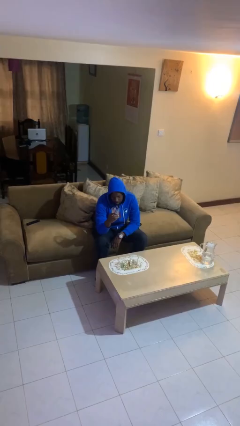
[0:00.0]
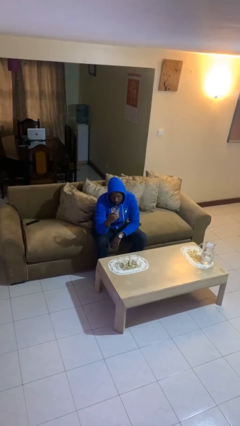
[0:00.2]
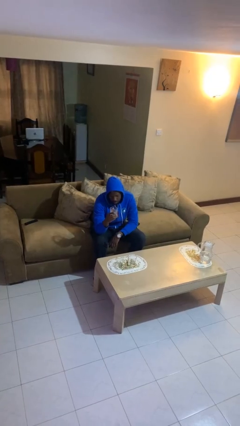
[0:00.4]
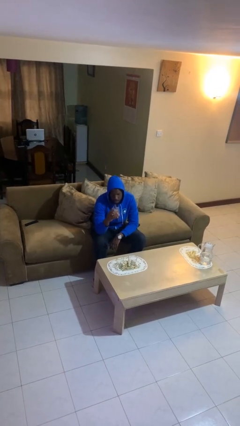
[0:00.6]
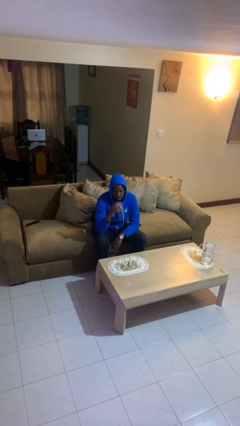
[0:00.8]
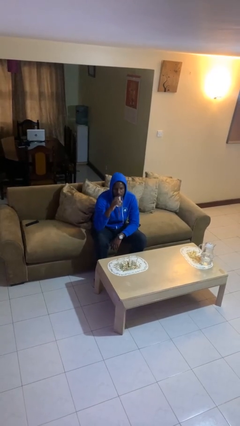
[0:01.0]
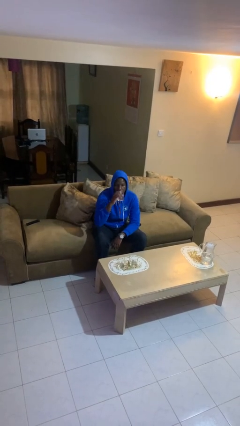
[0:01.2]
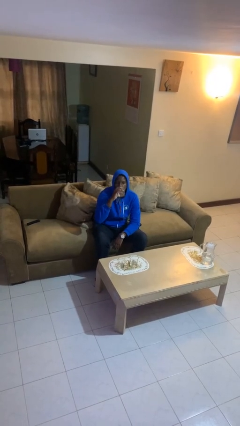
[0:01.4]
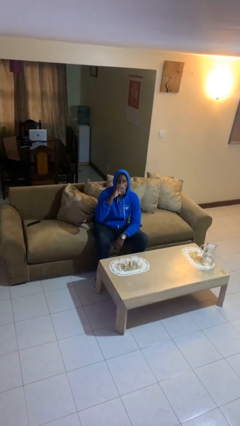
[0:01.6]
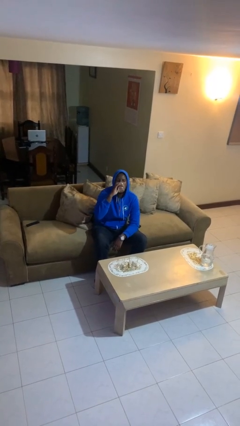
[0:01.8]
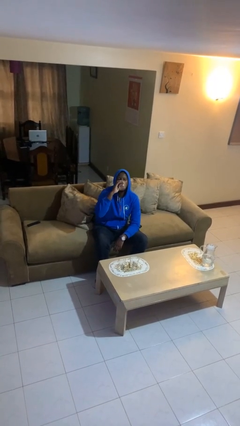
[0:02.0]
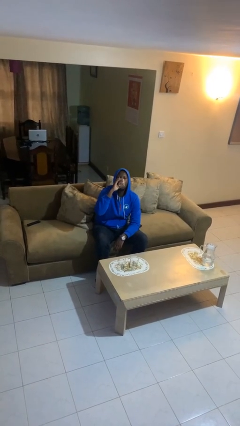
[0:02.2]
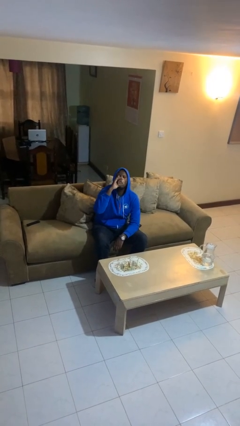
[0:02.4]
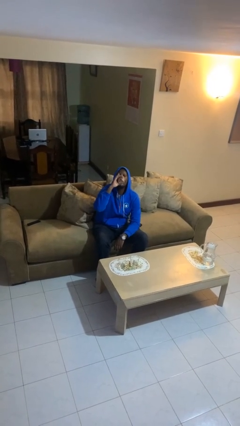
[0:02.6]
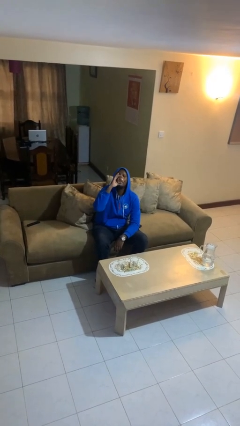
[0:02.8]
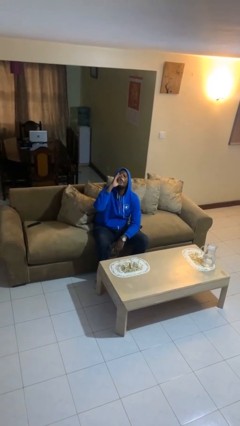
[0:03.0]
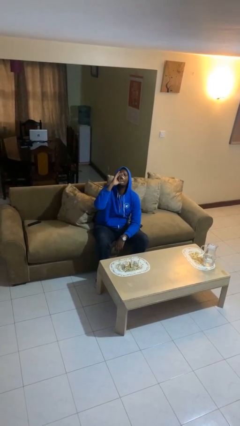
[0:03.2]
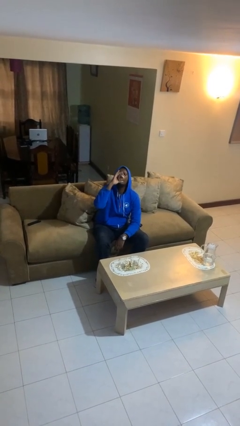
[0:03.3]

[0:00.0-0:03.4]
person drinks from shotglass

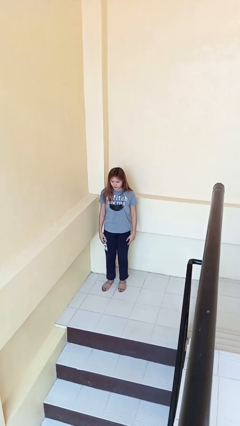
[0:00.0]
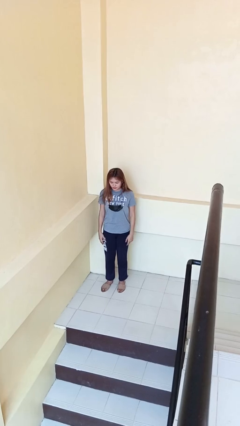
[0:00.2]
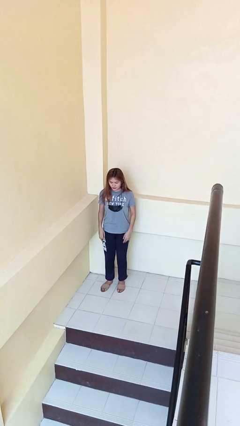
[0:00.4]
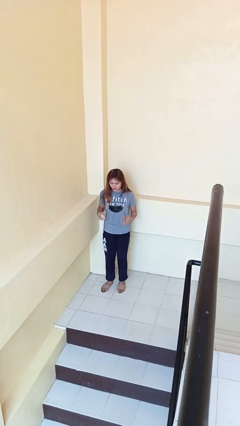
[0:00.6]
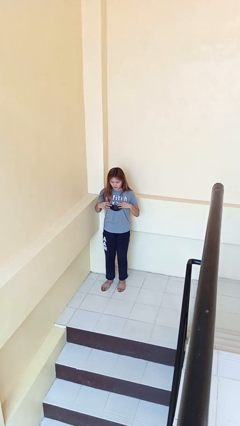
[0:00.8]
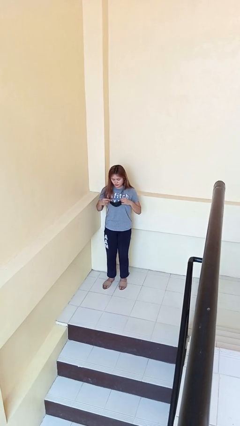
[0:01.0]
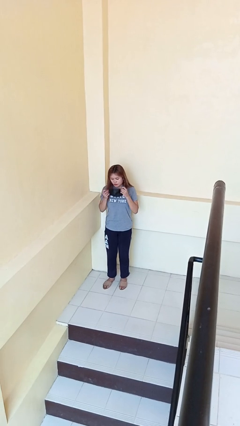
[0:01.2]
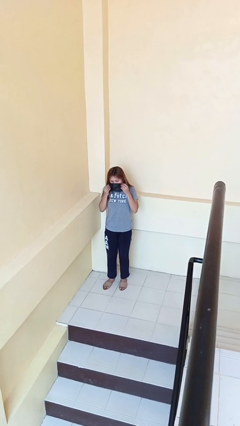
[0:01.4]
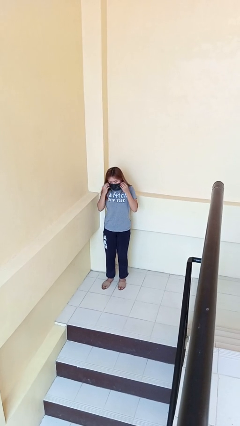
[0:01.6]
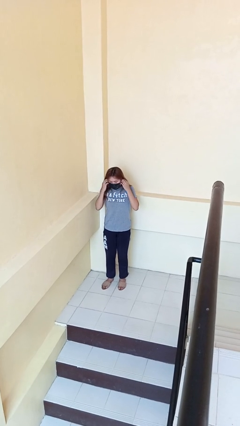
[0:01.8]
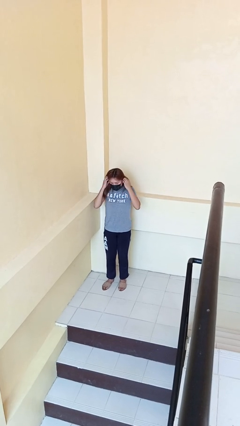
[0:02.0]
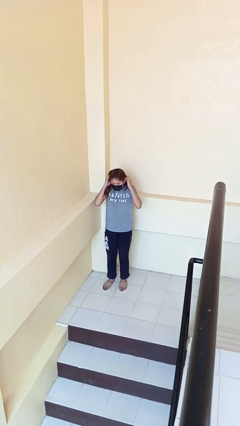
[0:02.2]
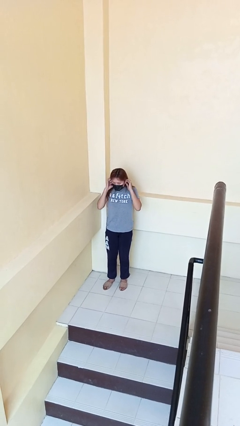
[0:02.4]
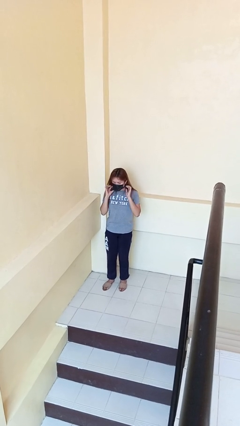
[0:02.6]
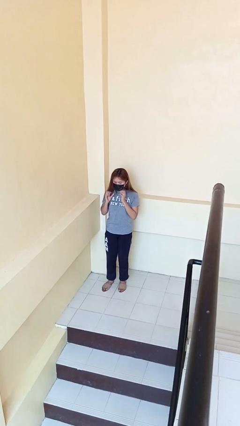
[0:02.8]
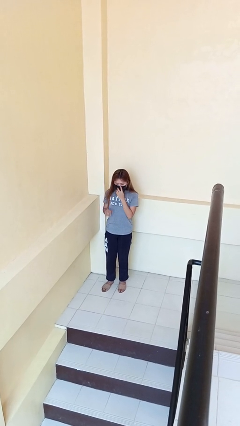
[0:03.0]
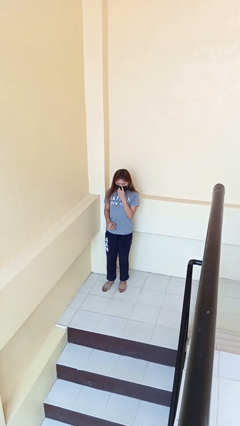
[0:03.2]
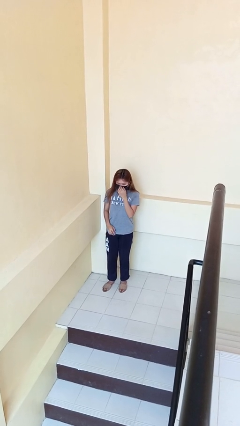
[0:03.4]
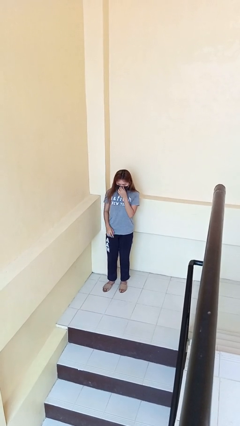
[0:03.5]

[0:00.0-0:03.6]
person puts on facemask

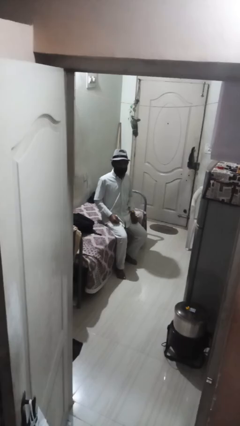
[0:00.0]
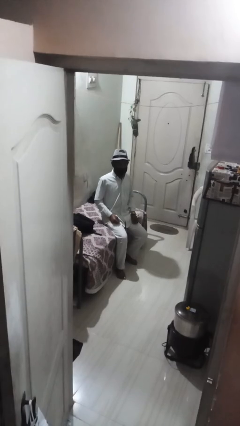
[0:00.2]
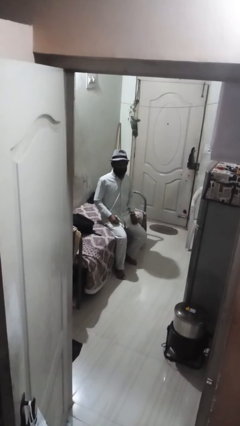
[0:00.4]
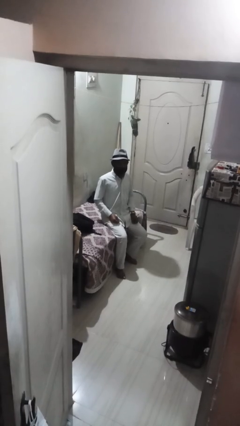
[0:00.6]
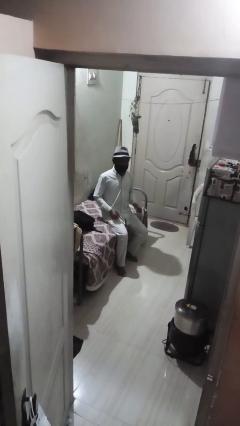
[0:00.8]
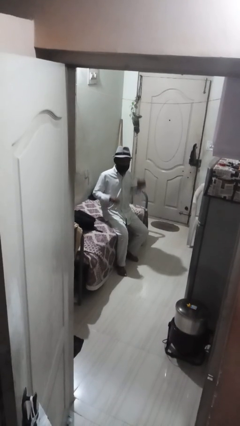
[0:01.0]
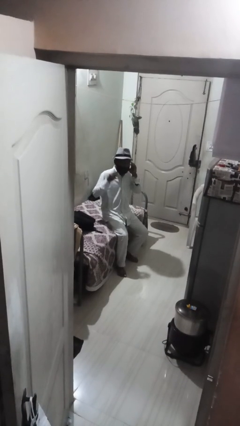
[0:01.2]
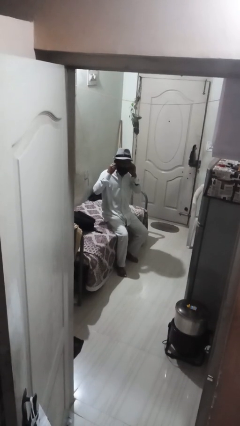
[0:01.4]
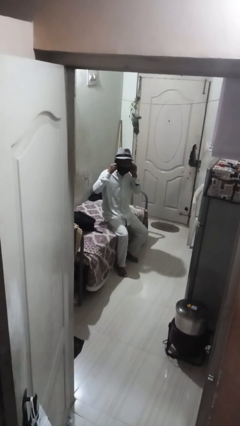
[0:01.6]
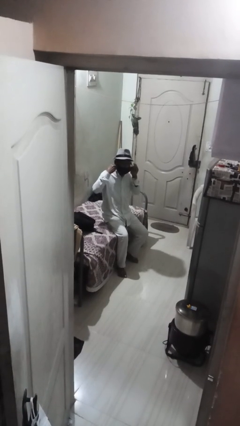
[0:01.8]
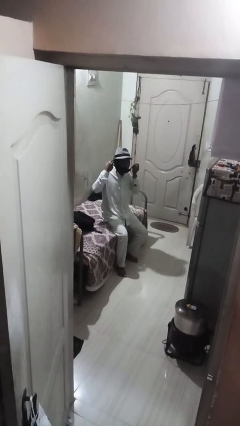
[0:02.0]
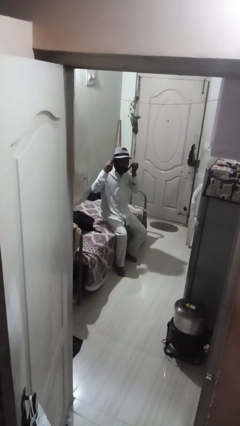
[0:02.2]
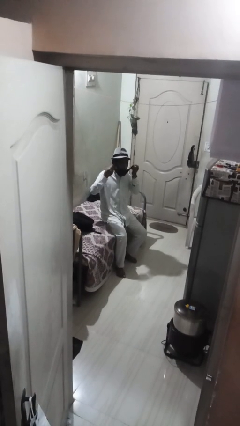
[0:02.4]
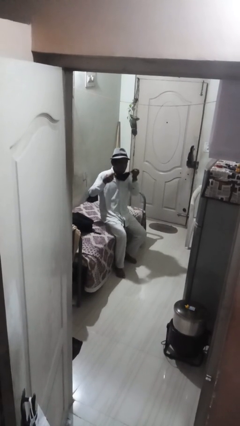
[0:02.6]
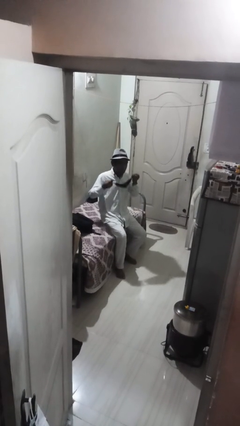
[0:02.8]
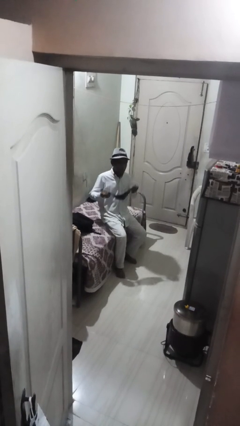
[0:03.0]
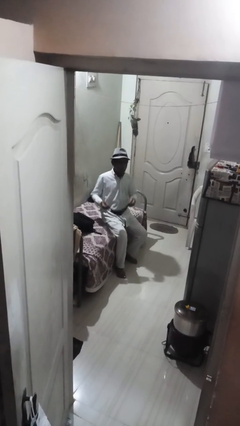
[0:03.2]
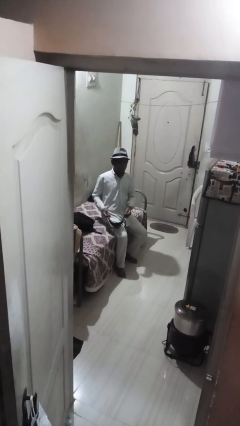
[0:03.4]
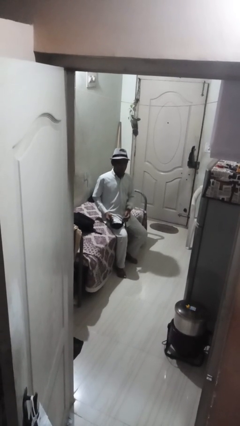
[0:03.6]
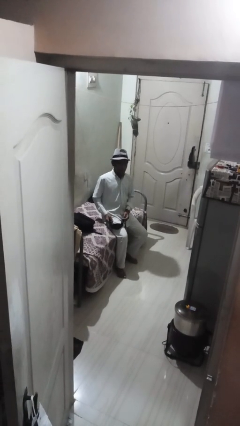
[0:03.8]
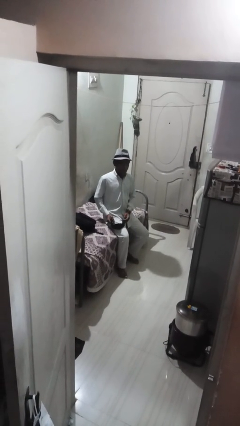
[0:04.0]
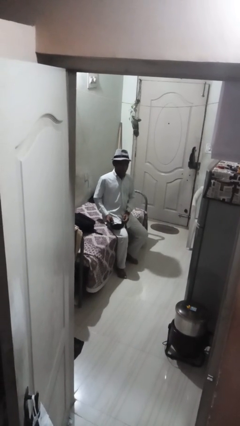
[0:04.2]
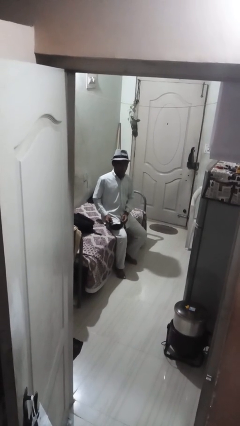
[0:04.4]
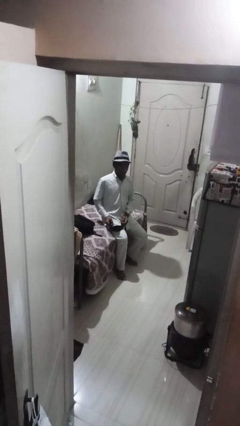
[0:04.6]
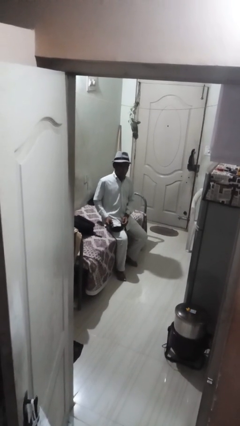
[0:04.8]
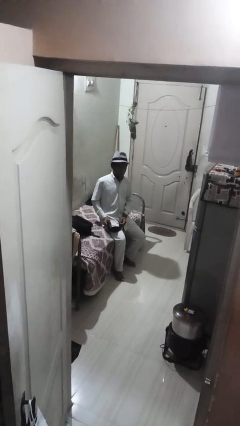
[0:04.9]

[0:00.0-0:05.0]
person takes off facemask

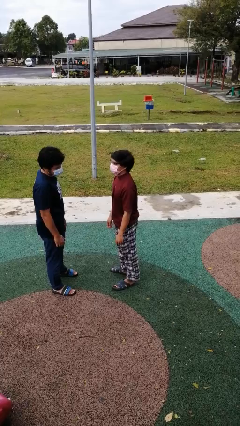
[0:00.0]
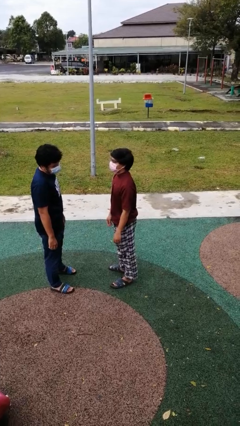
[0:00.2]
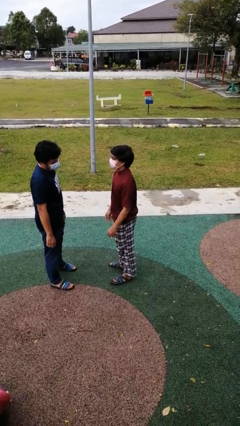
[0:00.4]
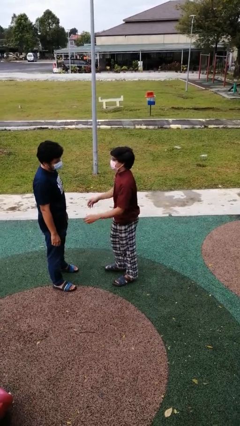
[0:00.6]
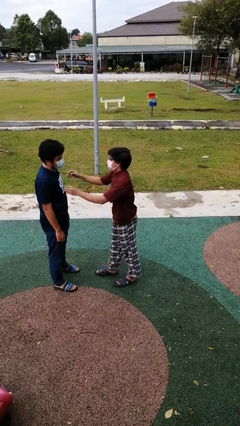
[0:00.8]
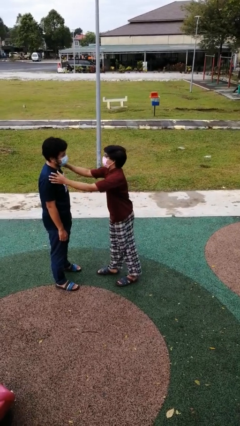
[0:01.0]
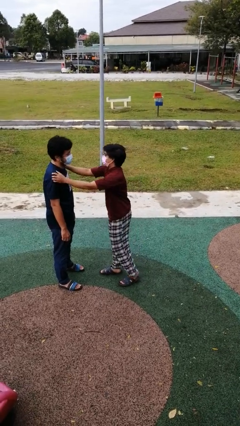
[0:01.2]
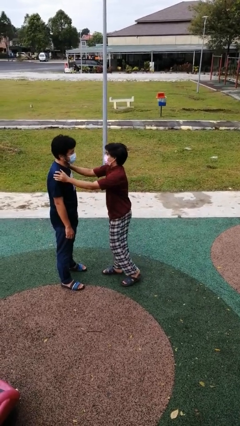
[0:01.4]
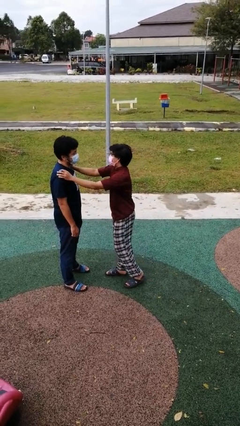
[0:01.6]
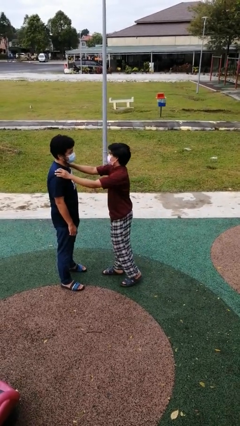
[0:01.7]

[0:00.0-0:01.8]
person pounds shoulders of person

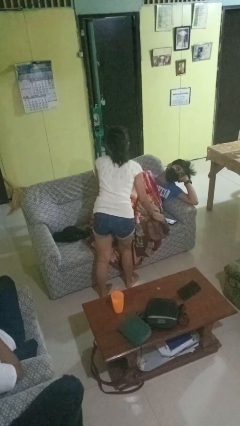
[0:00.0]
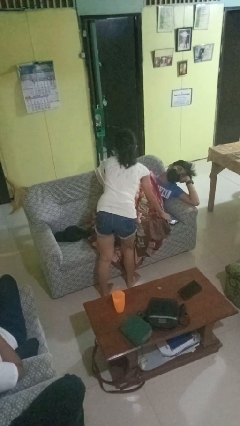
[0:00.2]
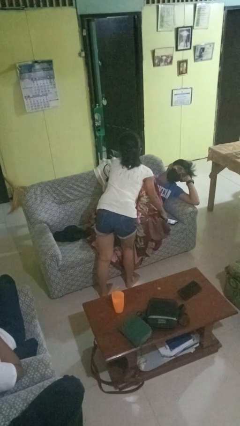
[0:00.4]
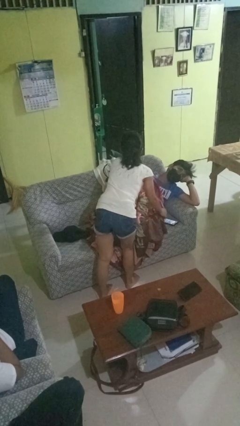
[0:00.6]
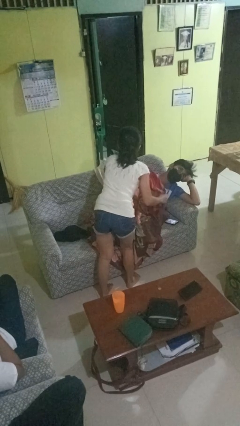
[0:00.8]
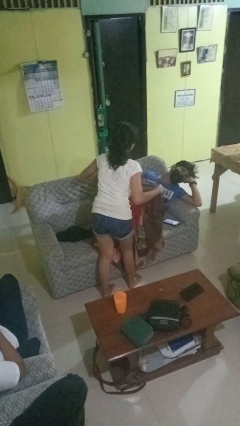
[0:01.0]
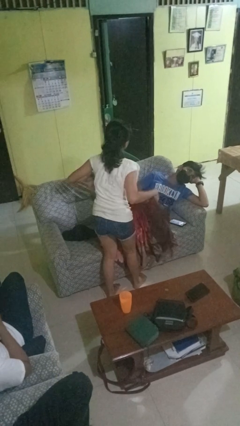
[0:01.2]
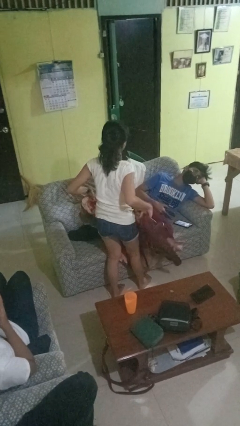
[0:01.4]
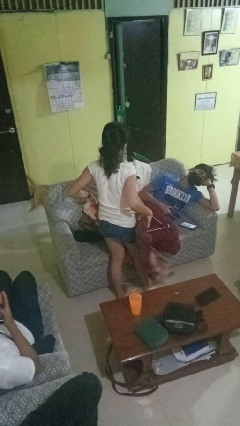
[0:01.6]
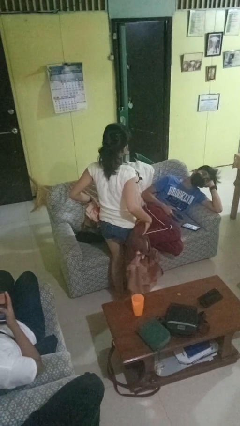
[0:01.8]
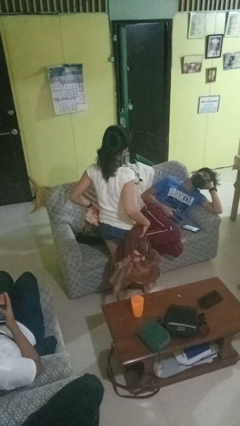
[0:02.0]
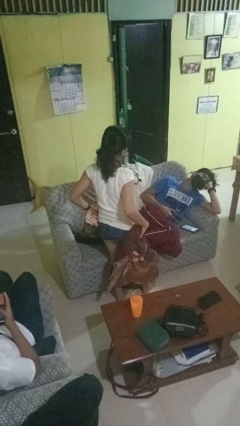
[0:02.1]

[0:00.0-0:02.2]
person uncovers friend with blanket

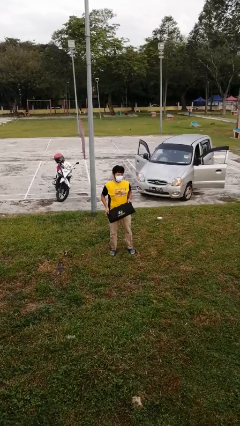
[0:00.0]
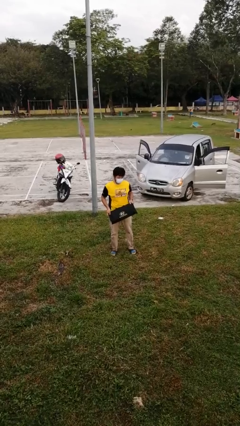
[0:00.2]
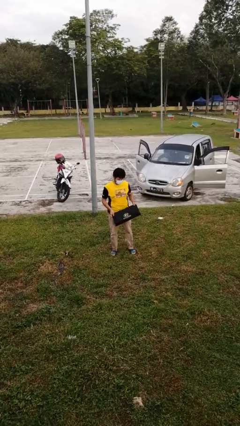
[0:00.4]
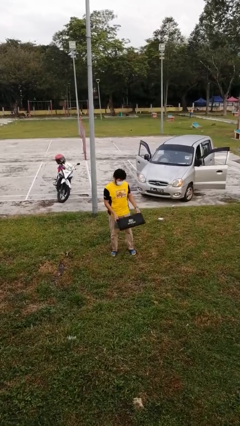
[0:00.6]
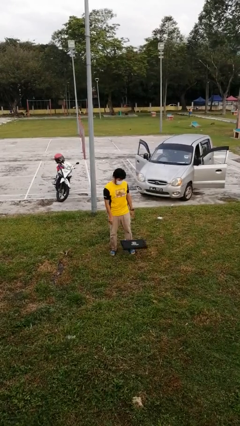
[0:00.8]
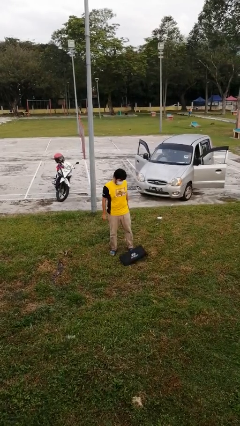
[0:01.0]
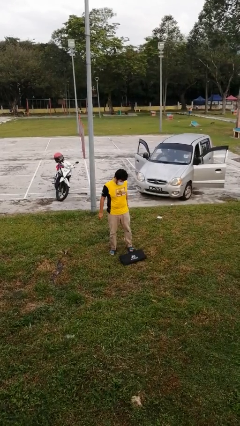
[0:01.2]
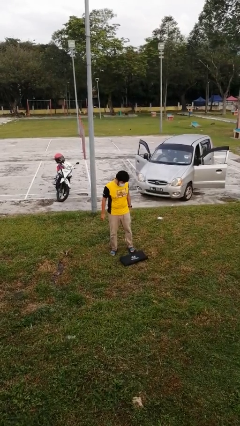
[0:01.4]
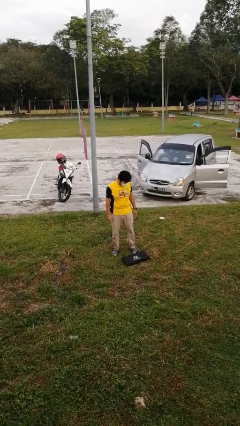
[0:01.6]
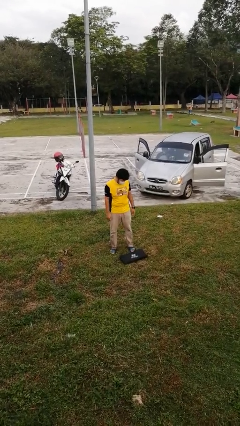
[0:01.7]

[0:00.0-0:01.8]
person drops object
